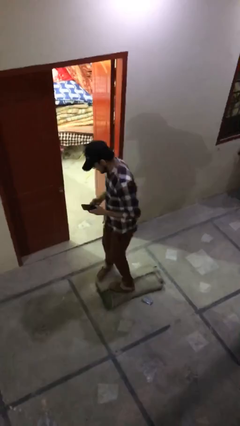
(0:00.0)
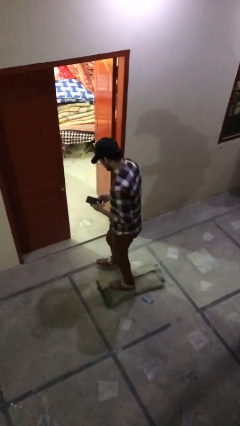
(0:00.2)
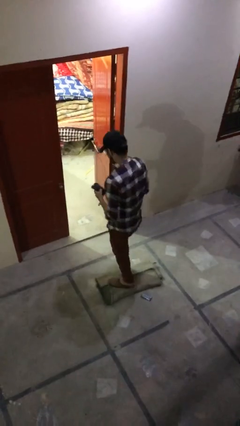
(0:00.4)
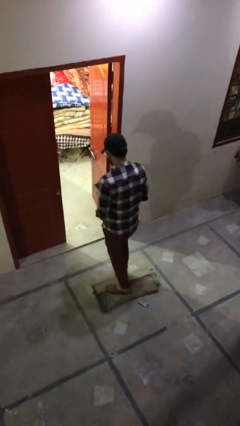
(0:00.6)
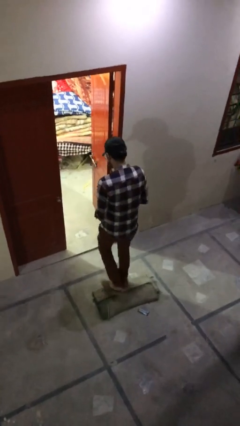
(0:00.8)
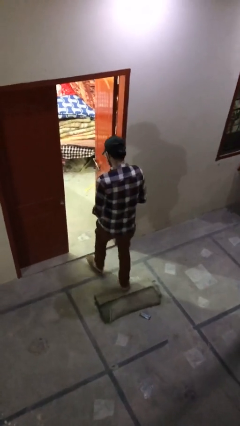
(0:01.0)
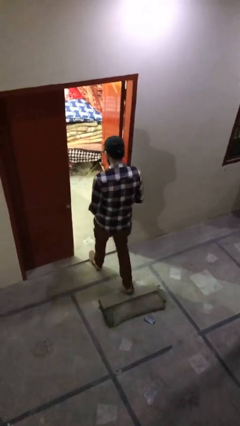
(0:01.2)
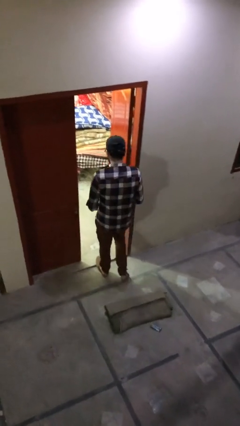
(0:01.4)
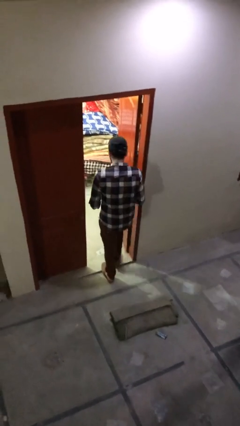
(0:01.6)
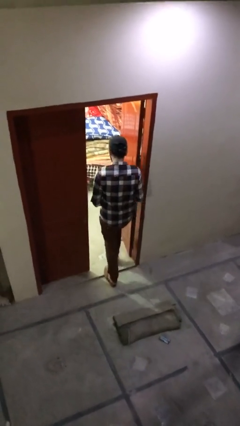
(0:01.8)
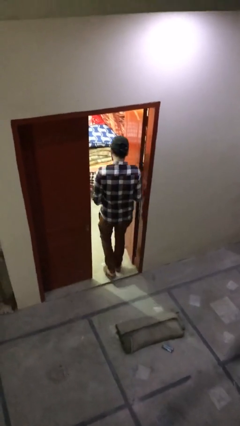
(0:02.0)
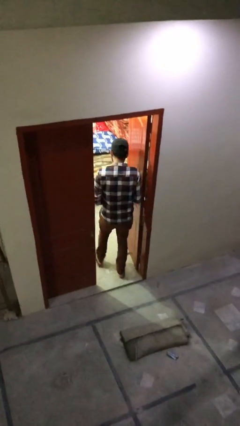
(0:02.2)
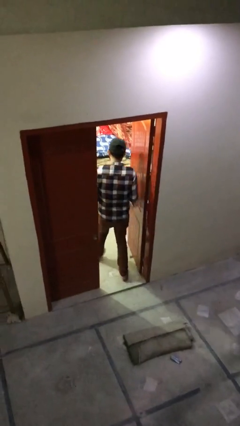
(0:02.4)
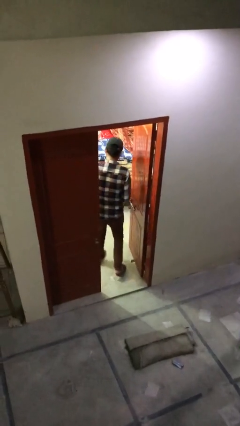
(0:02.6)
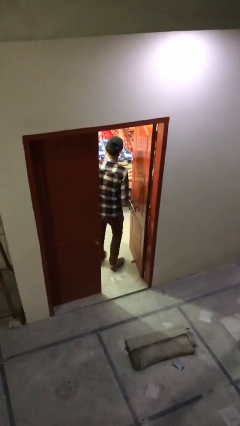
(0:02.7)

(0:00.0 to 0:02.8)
person exits scene through structure

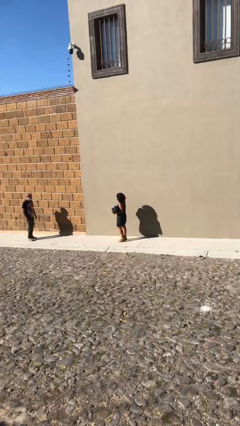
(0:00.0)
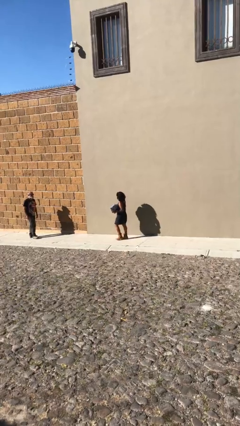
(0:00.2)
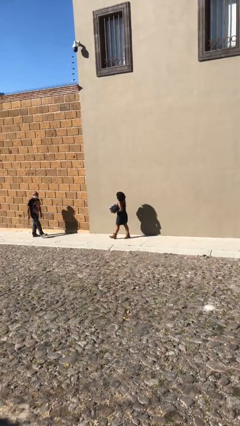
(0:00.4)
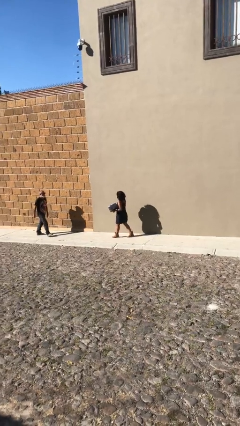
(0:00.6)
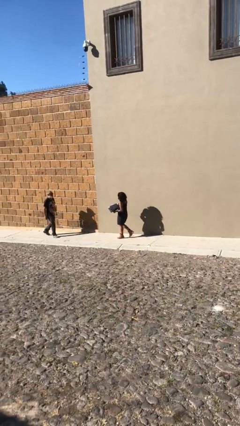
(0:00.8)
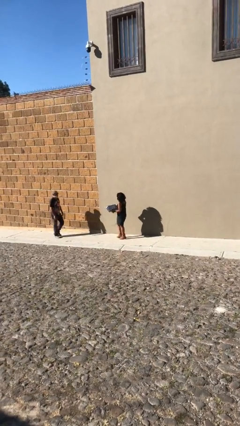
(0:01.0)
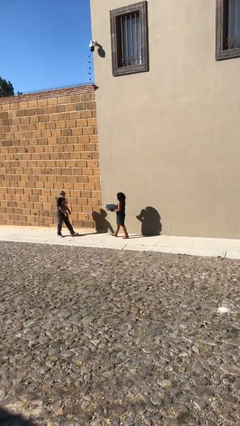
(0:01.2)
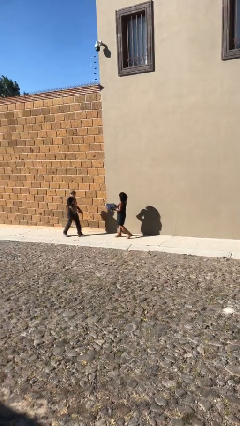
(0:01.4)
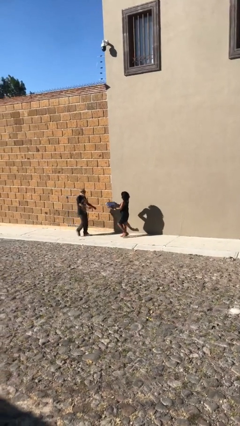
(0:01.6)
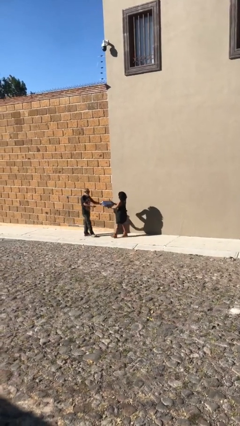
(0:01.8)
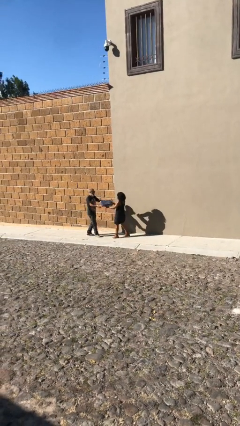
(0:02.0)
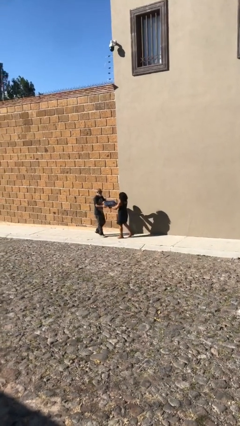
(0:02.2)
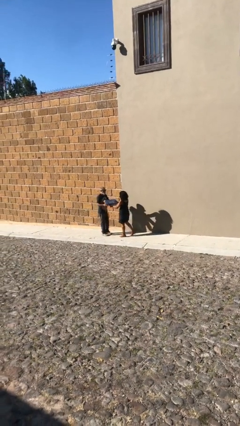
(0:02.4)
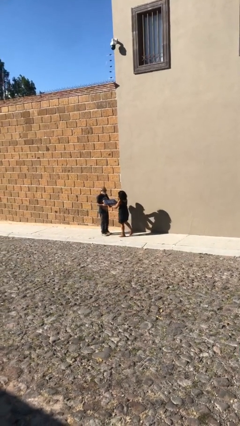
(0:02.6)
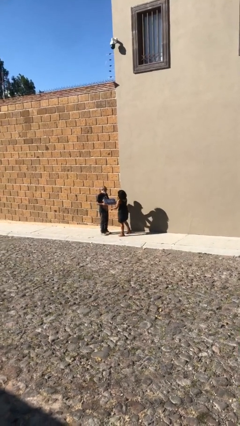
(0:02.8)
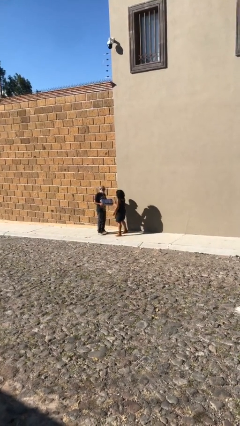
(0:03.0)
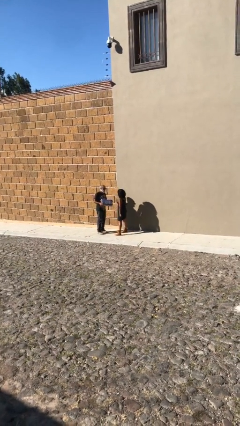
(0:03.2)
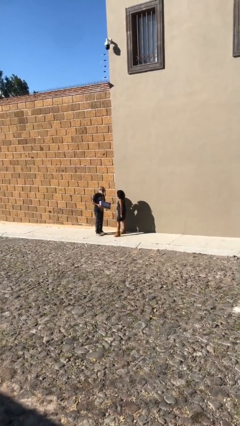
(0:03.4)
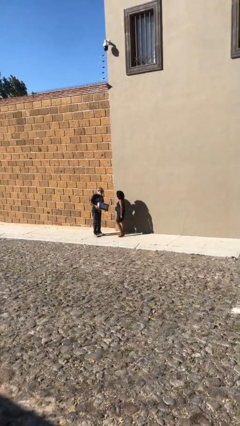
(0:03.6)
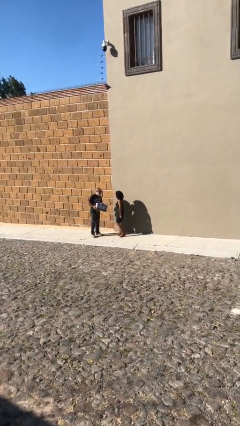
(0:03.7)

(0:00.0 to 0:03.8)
person transfers object to person

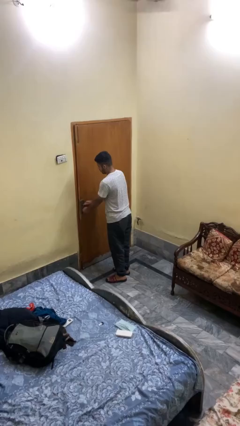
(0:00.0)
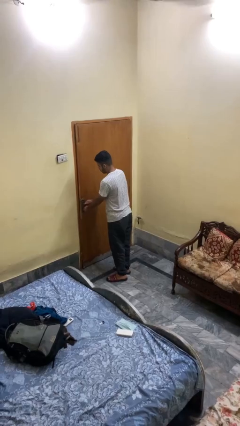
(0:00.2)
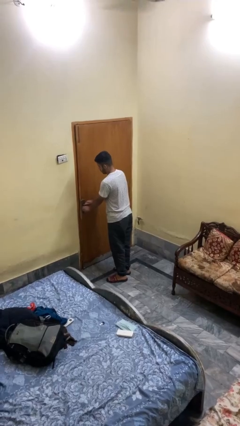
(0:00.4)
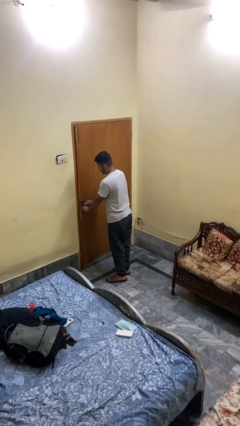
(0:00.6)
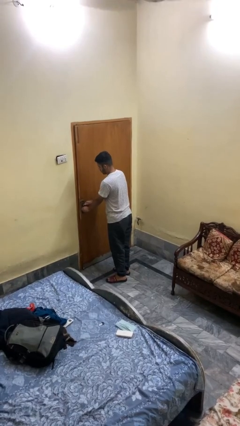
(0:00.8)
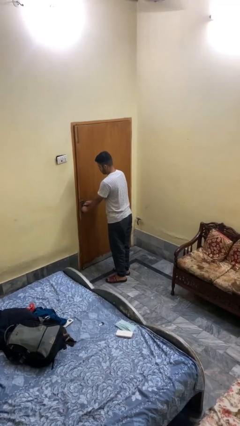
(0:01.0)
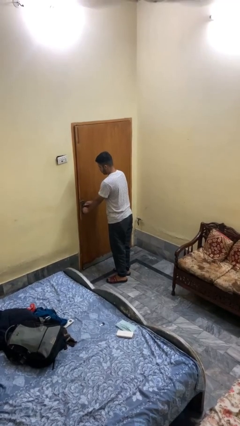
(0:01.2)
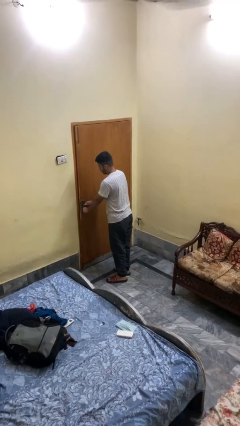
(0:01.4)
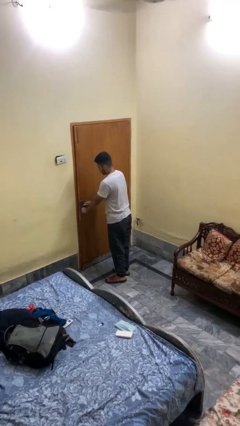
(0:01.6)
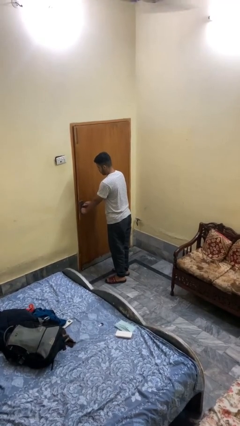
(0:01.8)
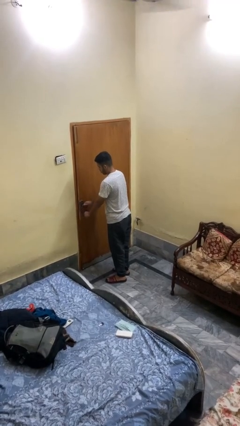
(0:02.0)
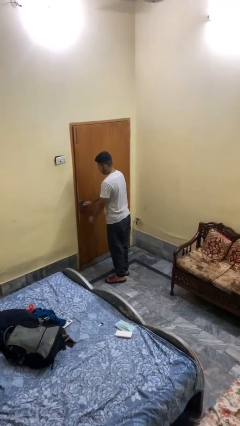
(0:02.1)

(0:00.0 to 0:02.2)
person locks door with keys

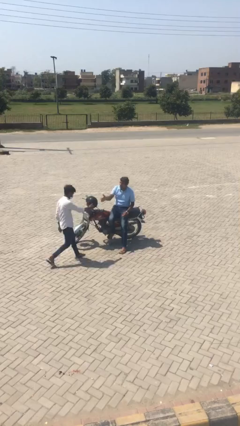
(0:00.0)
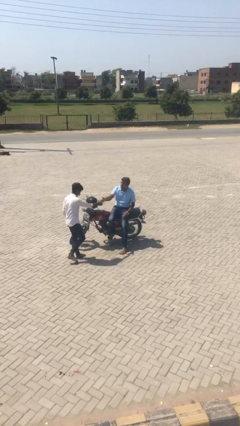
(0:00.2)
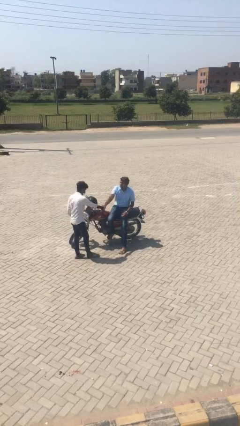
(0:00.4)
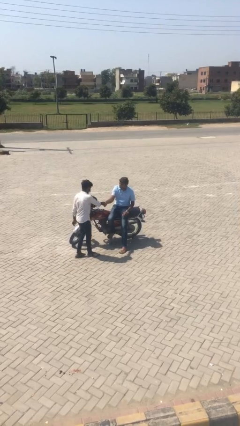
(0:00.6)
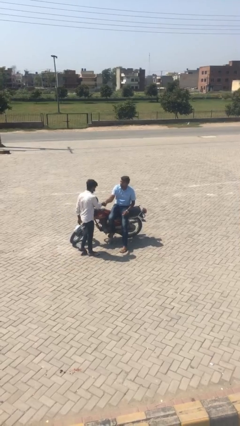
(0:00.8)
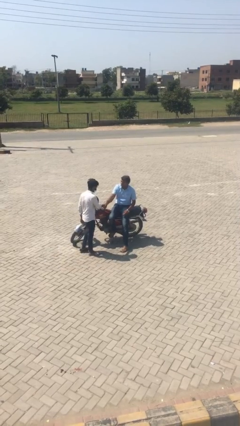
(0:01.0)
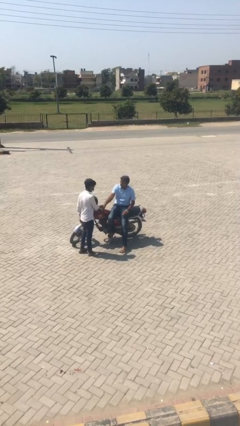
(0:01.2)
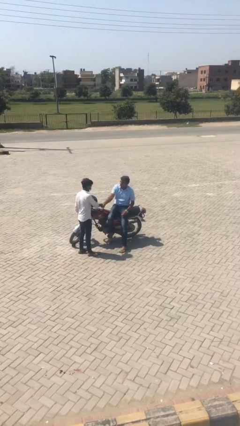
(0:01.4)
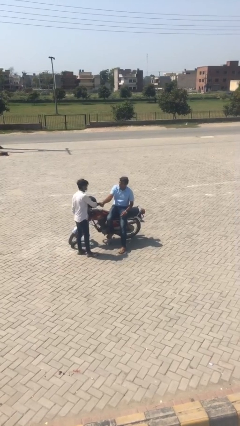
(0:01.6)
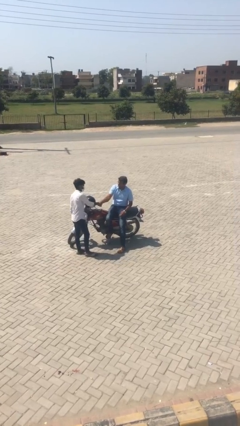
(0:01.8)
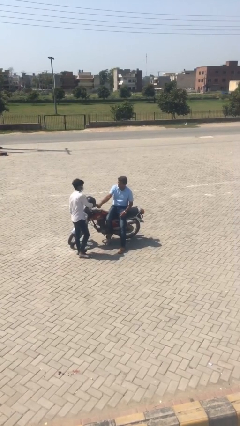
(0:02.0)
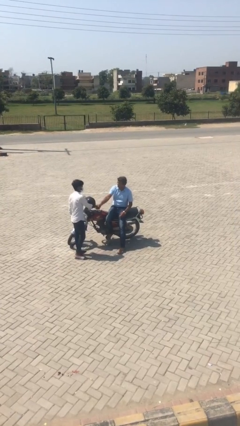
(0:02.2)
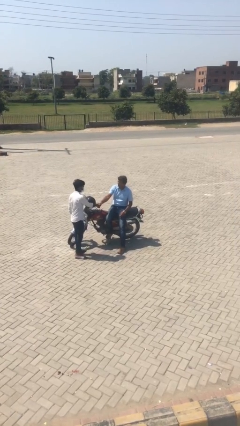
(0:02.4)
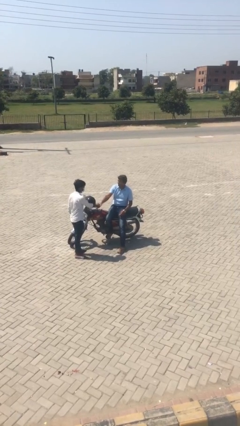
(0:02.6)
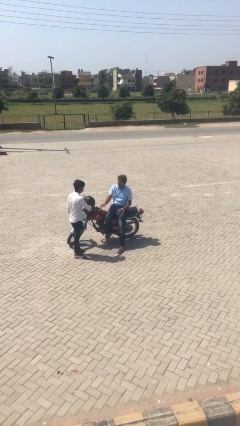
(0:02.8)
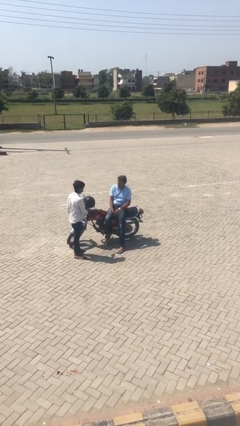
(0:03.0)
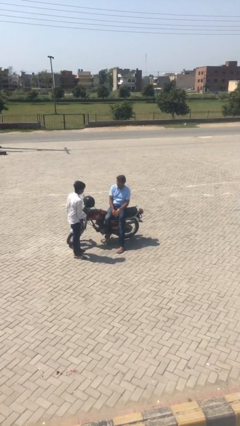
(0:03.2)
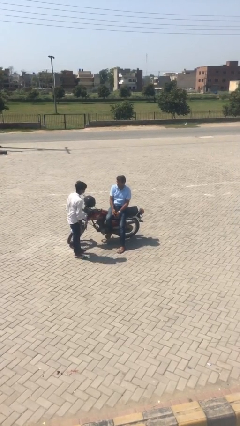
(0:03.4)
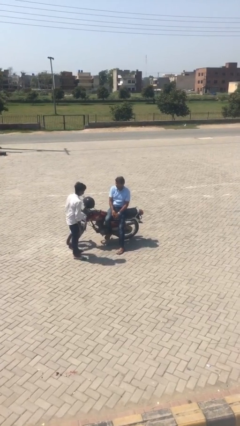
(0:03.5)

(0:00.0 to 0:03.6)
person shakes hand

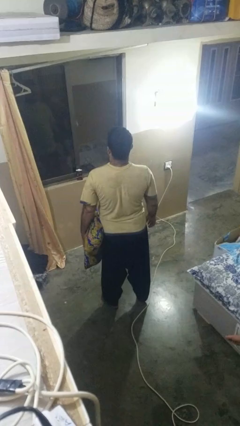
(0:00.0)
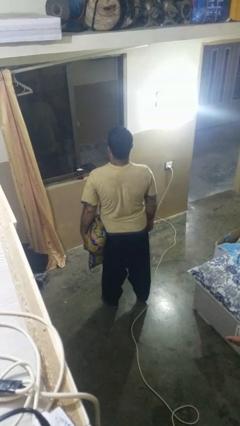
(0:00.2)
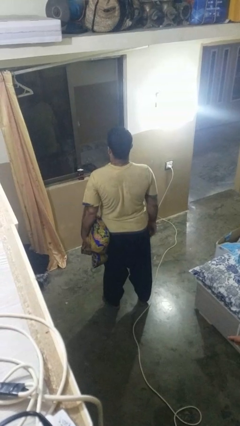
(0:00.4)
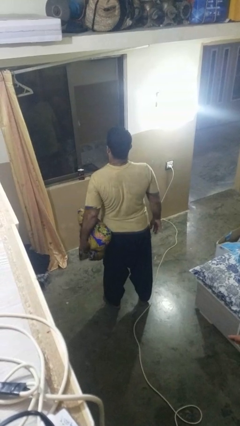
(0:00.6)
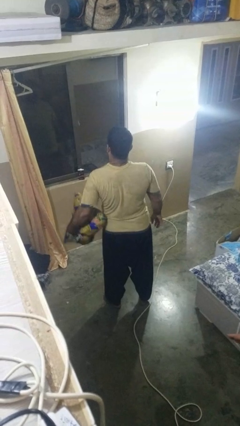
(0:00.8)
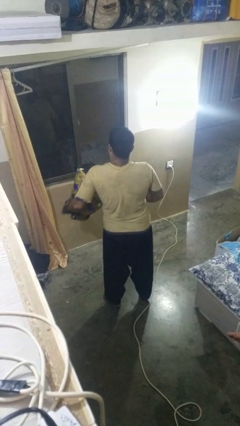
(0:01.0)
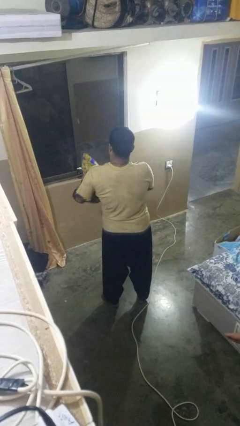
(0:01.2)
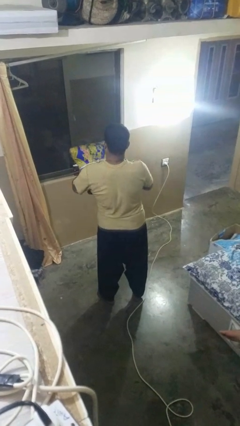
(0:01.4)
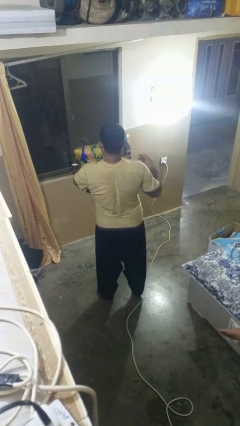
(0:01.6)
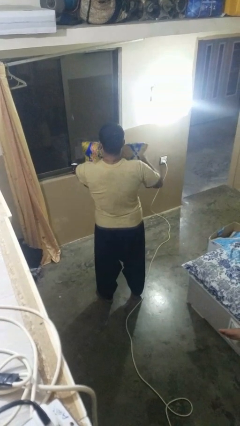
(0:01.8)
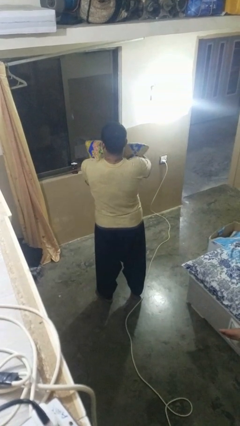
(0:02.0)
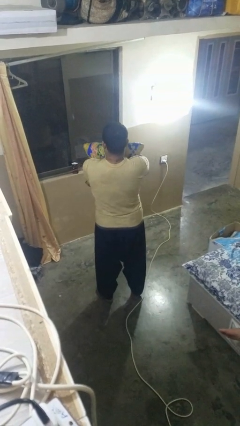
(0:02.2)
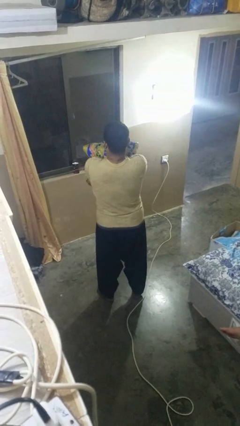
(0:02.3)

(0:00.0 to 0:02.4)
person squeezes object

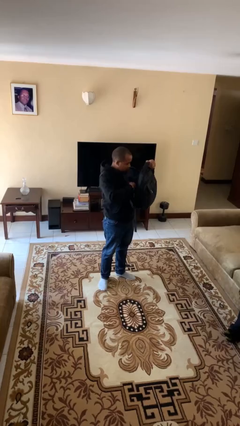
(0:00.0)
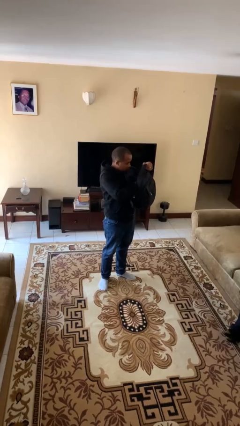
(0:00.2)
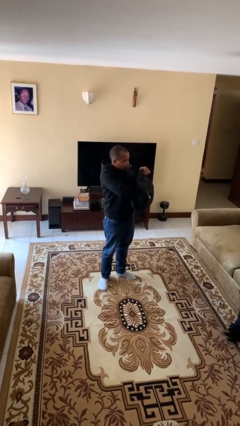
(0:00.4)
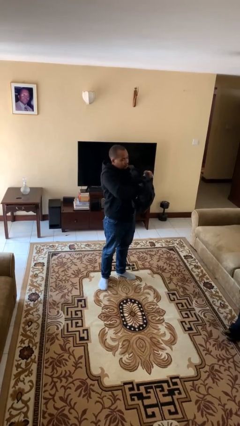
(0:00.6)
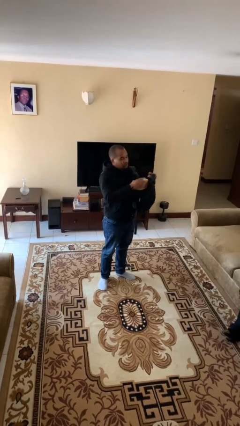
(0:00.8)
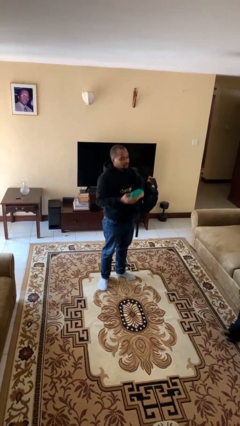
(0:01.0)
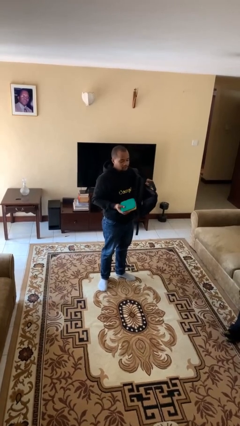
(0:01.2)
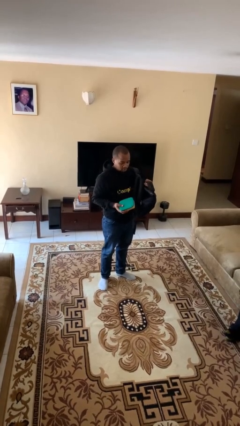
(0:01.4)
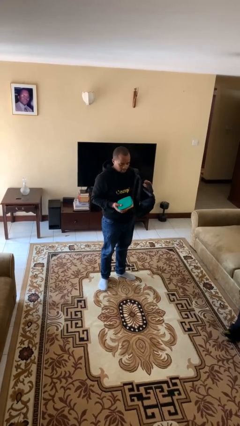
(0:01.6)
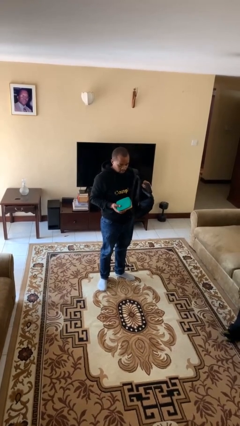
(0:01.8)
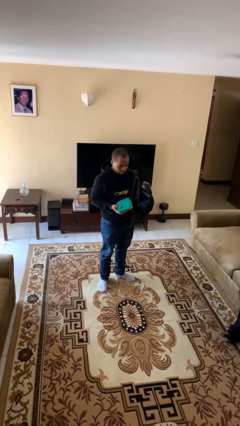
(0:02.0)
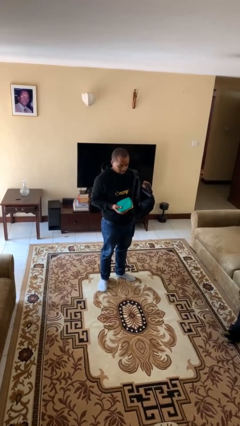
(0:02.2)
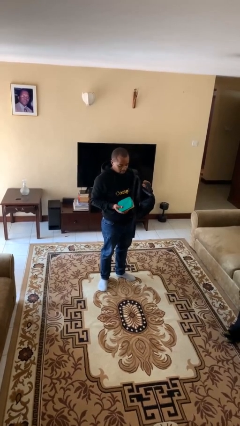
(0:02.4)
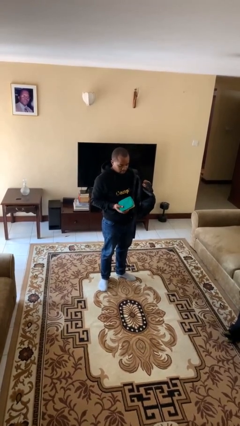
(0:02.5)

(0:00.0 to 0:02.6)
person takes object from backpack
